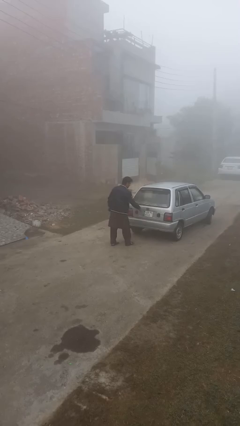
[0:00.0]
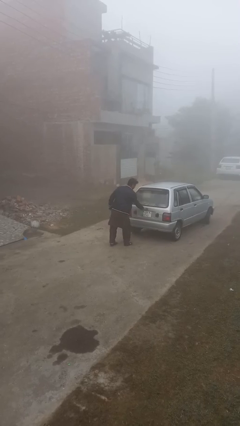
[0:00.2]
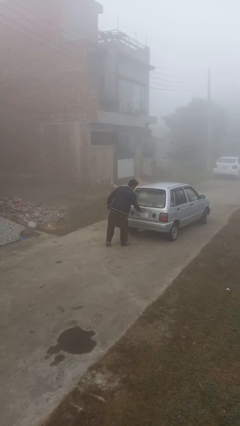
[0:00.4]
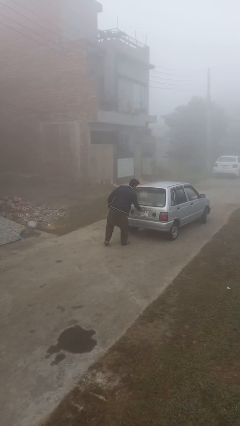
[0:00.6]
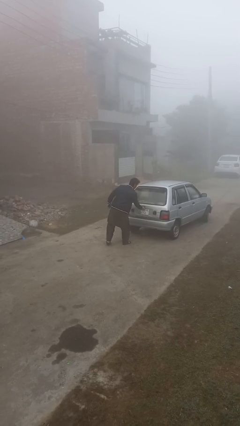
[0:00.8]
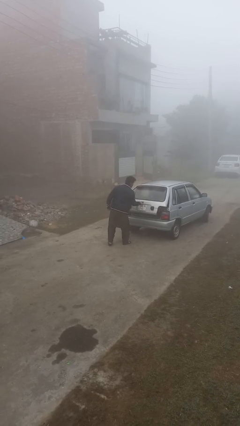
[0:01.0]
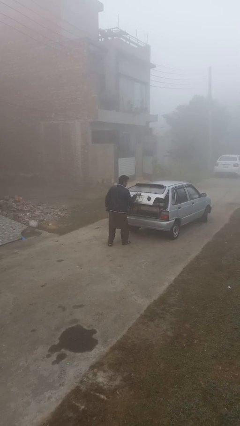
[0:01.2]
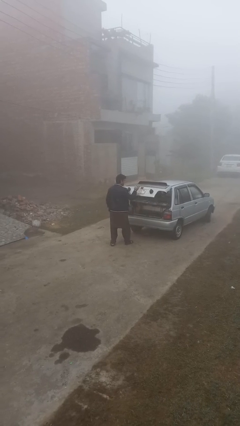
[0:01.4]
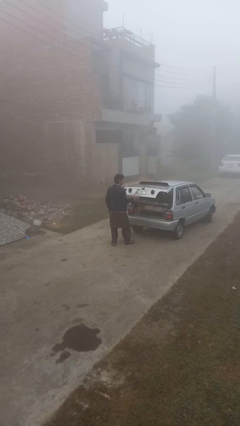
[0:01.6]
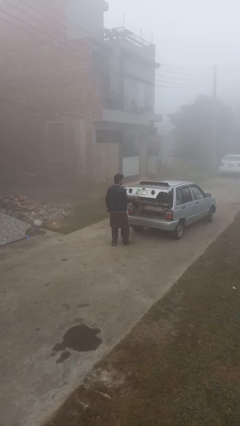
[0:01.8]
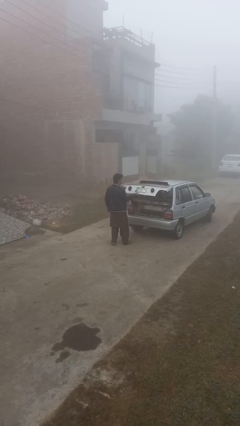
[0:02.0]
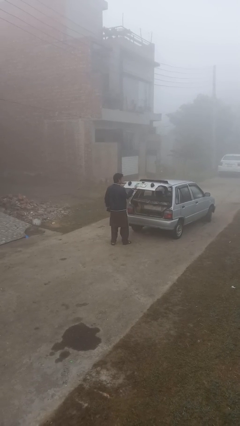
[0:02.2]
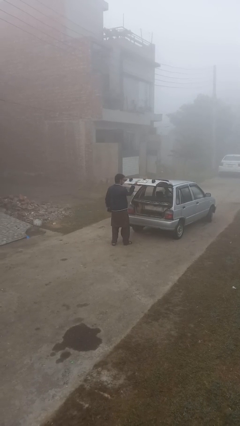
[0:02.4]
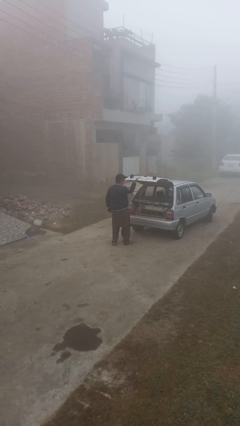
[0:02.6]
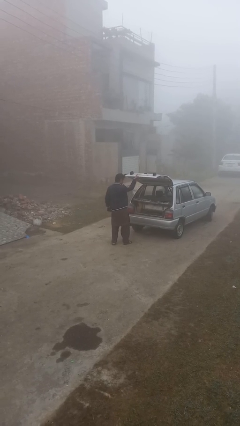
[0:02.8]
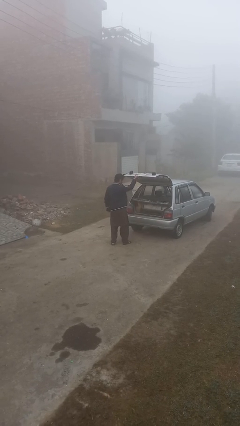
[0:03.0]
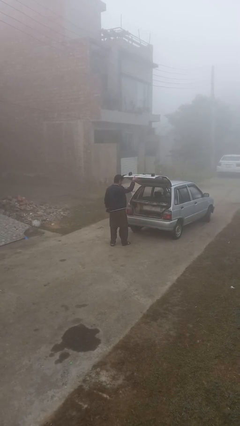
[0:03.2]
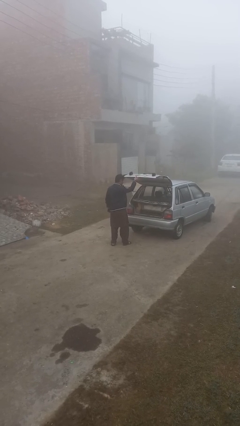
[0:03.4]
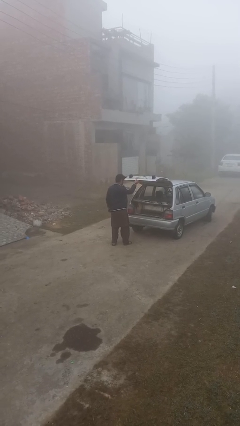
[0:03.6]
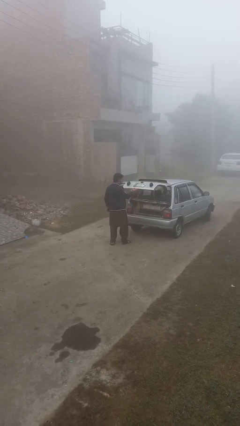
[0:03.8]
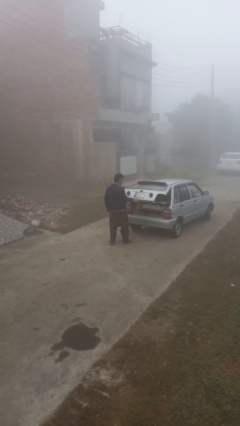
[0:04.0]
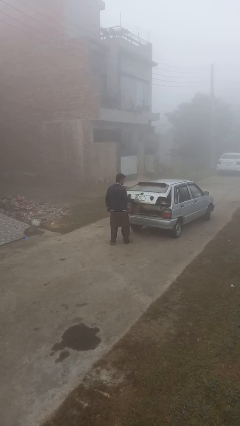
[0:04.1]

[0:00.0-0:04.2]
person opens car trunk

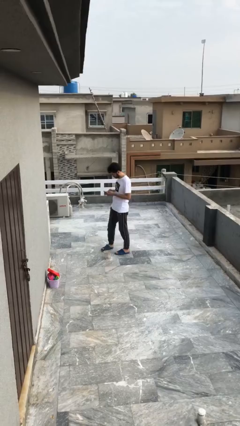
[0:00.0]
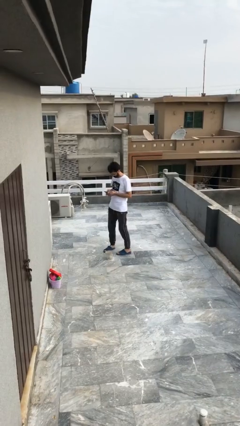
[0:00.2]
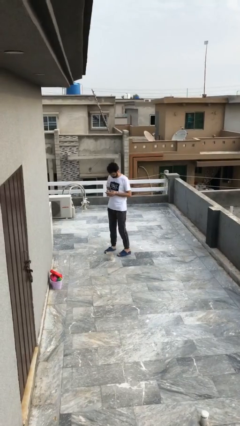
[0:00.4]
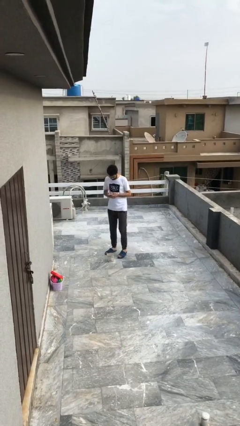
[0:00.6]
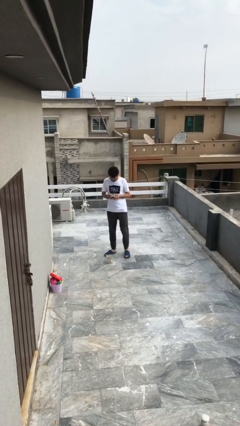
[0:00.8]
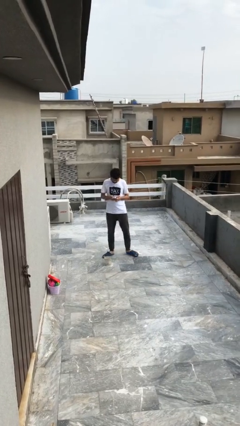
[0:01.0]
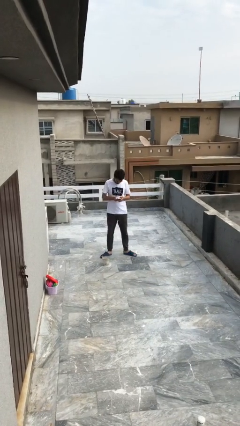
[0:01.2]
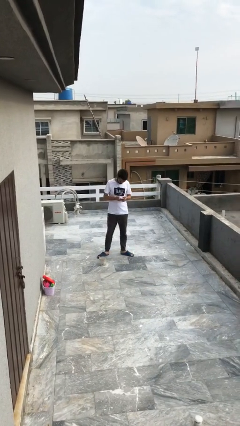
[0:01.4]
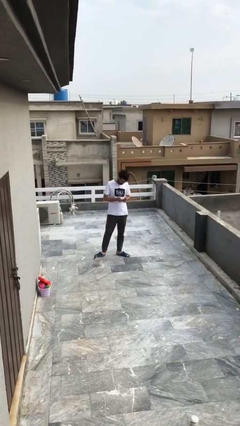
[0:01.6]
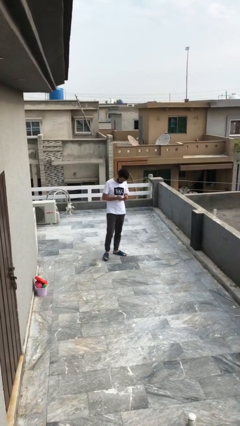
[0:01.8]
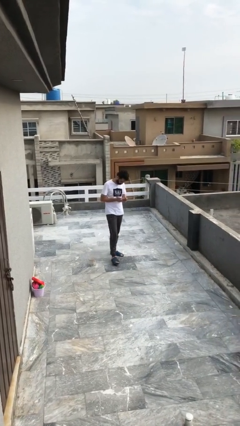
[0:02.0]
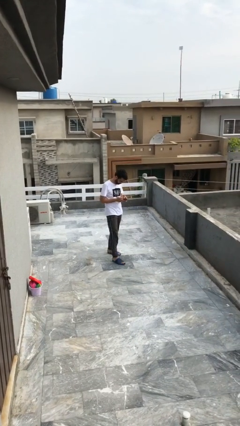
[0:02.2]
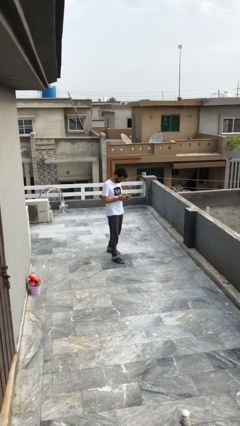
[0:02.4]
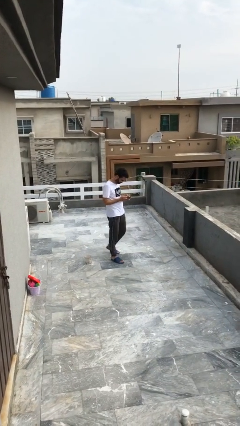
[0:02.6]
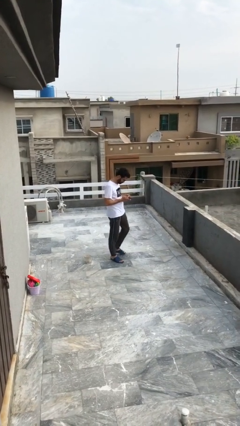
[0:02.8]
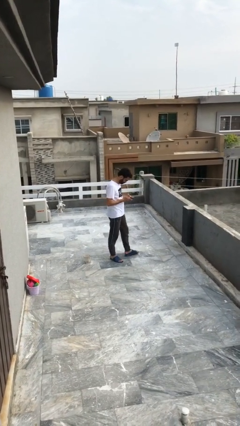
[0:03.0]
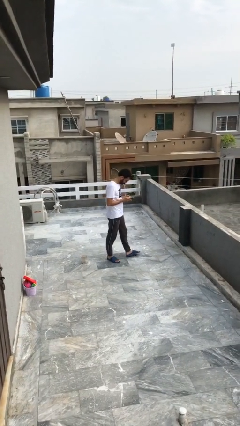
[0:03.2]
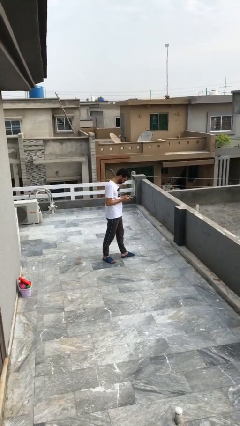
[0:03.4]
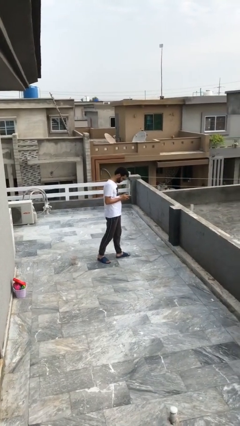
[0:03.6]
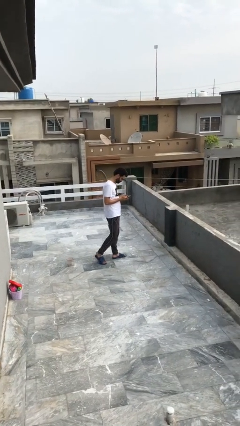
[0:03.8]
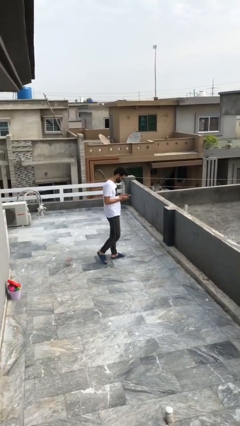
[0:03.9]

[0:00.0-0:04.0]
person texts on phone

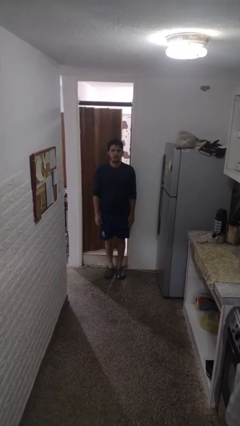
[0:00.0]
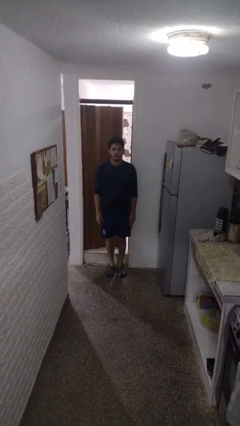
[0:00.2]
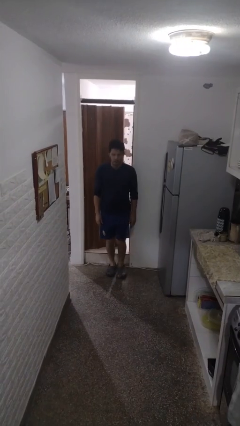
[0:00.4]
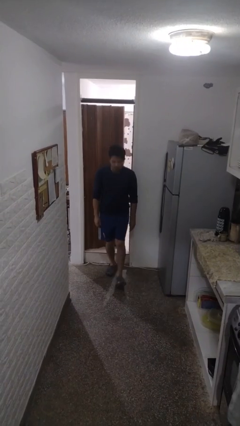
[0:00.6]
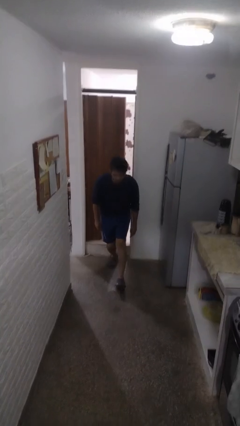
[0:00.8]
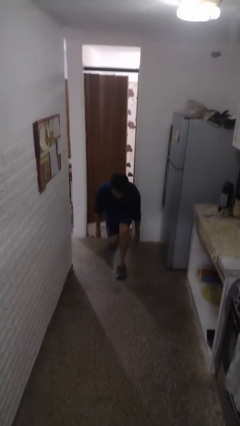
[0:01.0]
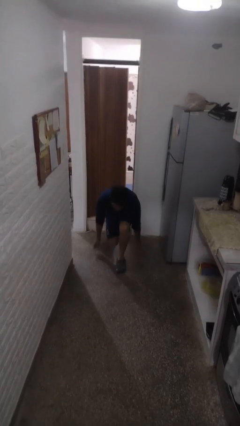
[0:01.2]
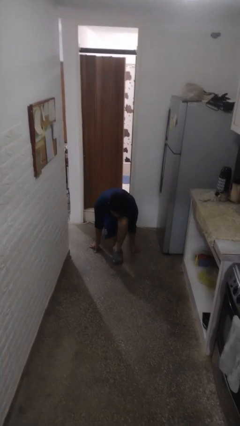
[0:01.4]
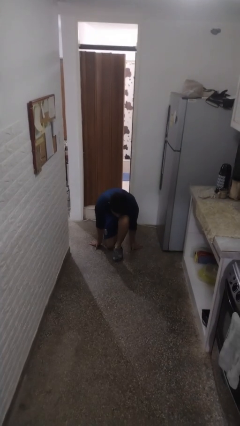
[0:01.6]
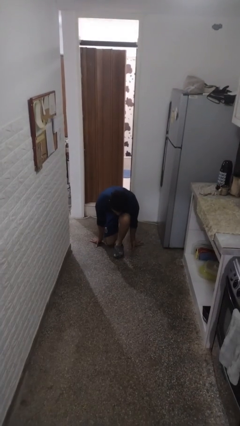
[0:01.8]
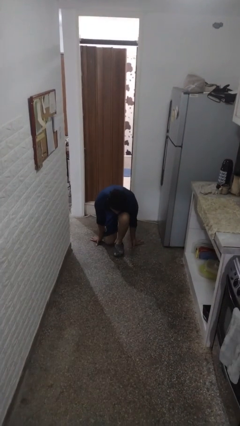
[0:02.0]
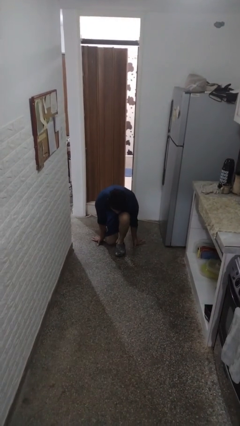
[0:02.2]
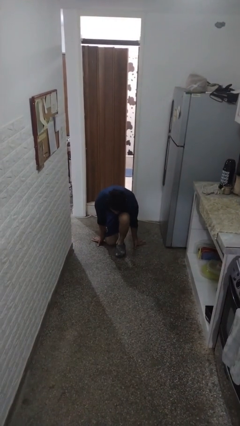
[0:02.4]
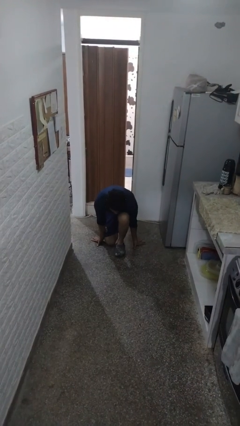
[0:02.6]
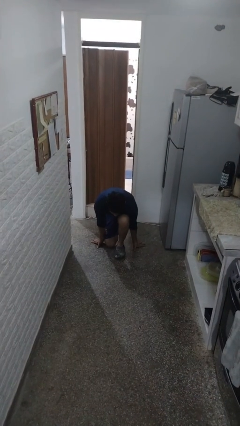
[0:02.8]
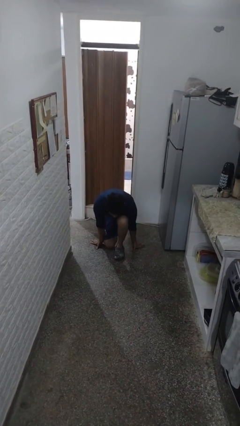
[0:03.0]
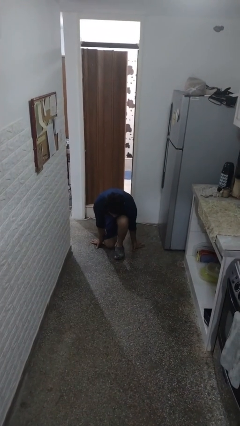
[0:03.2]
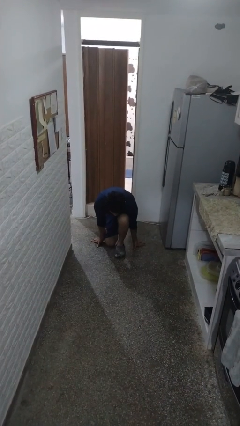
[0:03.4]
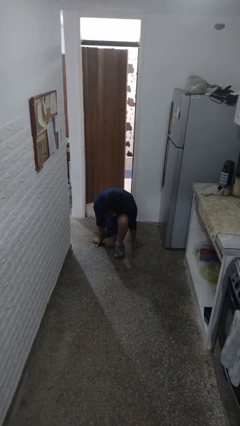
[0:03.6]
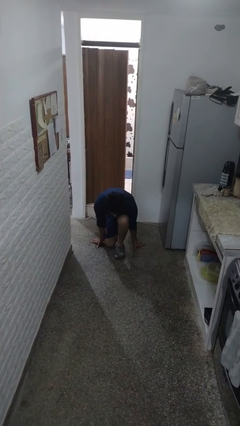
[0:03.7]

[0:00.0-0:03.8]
person kneels

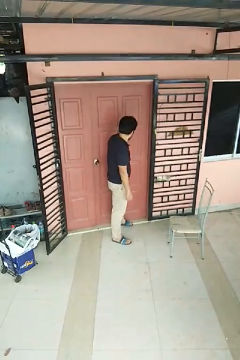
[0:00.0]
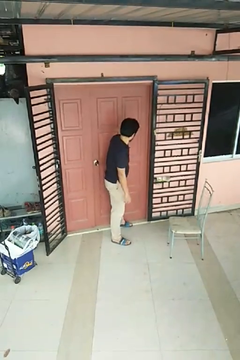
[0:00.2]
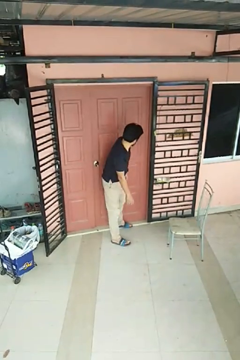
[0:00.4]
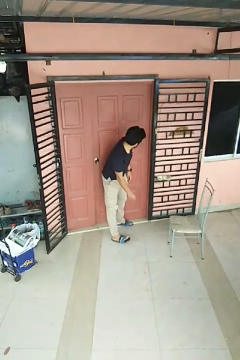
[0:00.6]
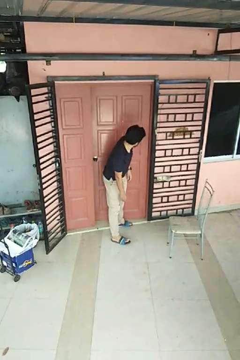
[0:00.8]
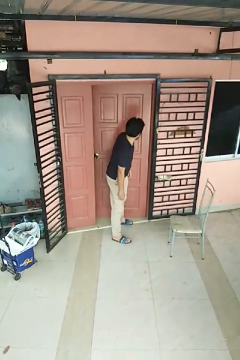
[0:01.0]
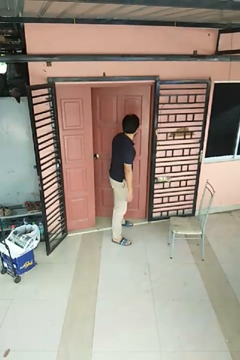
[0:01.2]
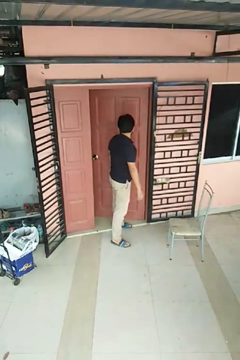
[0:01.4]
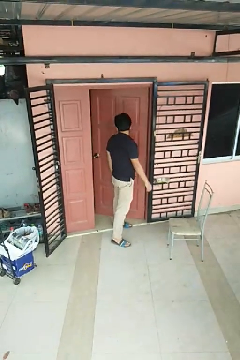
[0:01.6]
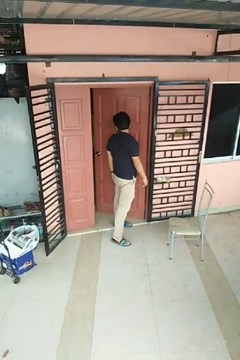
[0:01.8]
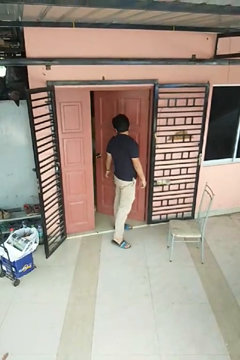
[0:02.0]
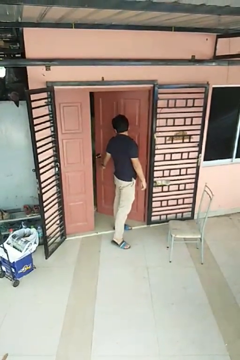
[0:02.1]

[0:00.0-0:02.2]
person opens facility door

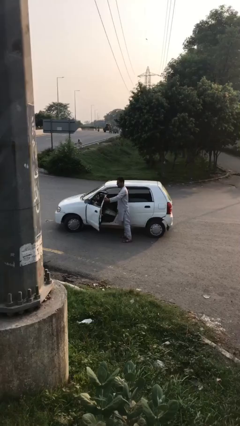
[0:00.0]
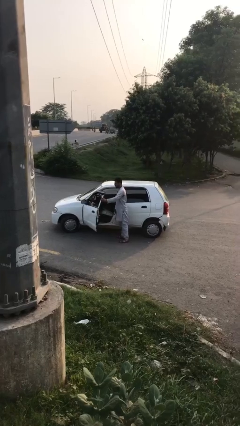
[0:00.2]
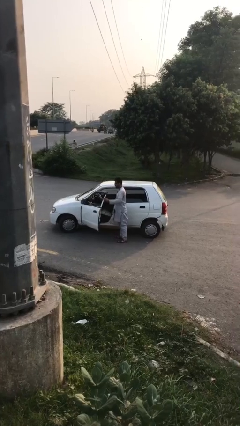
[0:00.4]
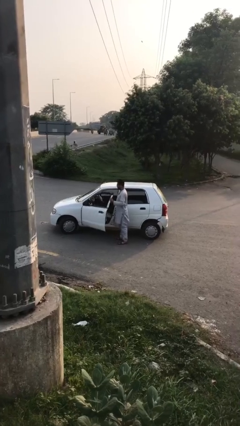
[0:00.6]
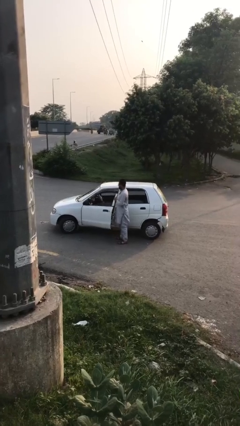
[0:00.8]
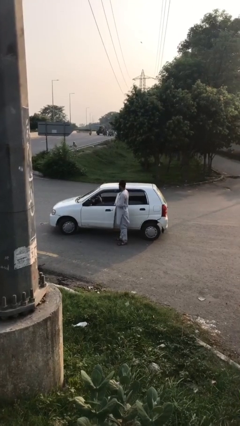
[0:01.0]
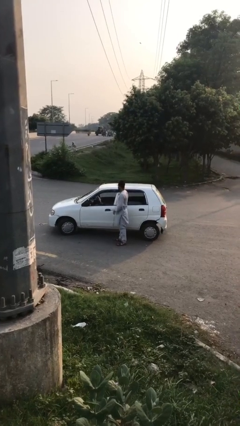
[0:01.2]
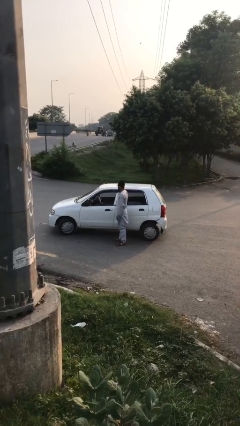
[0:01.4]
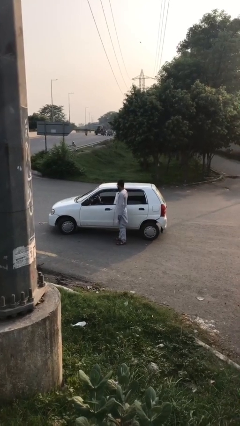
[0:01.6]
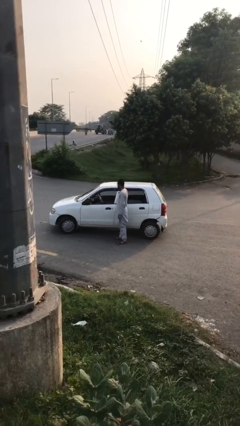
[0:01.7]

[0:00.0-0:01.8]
person closes car door

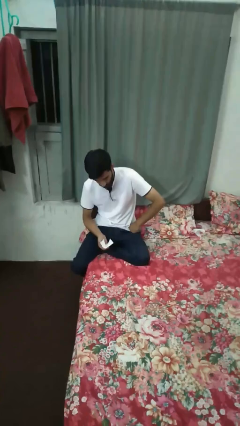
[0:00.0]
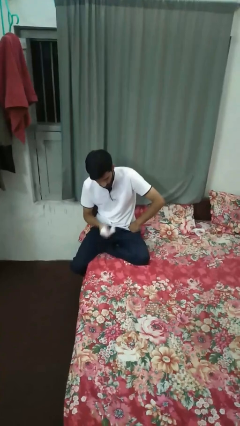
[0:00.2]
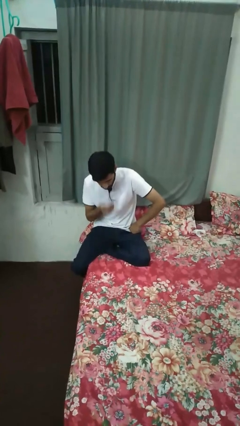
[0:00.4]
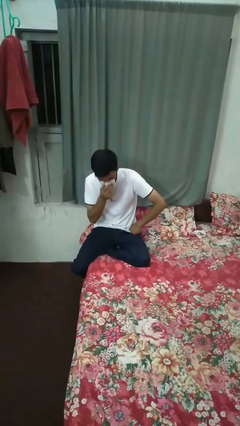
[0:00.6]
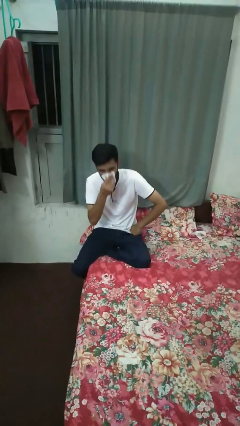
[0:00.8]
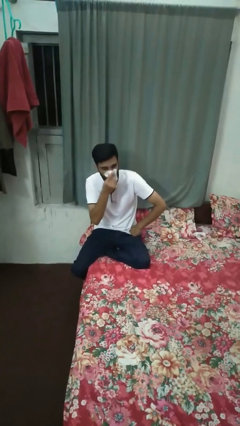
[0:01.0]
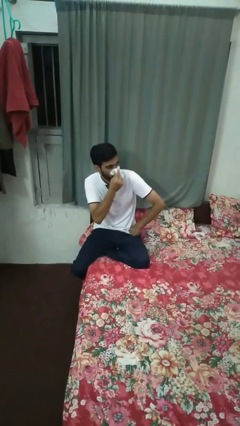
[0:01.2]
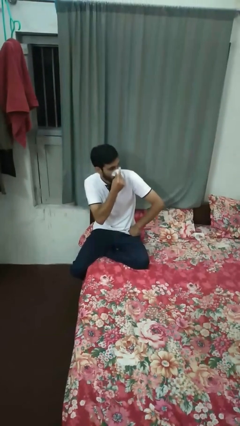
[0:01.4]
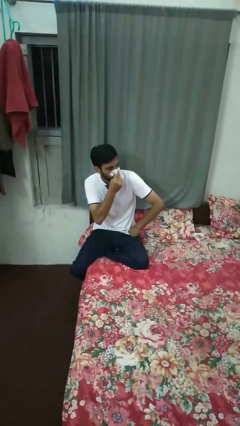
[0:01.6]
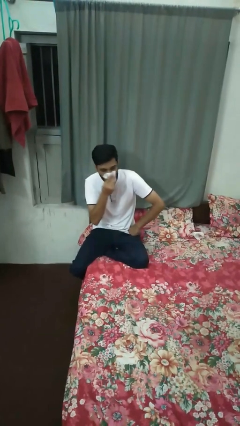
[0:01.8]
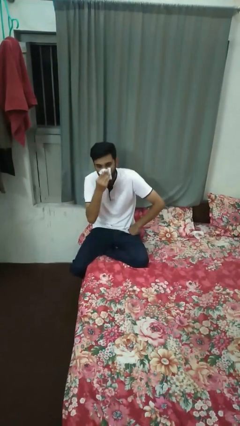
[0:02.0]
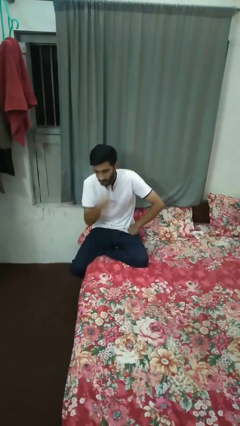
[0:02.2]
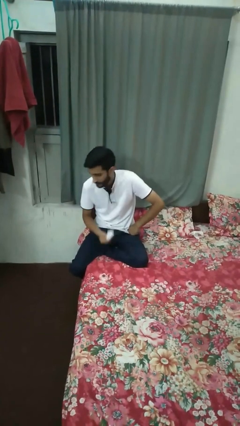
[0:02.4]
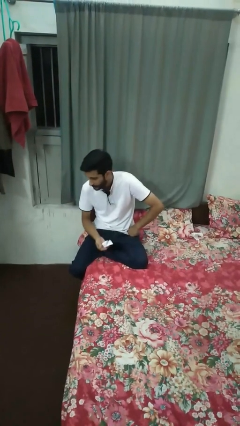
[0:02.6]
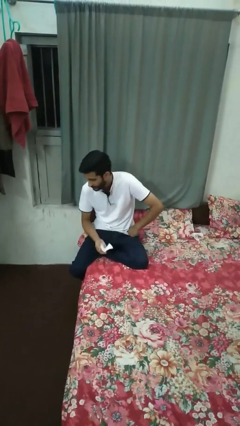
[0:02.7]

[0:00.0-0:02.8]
person blows nose
